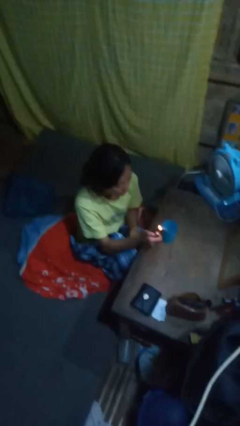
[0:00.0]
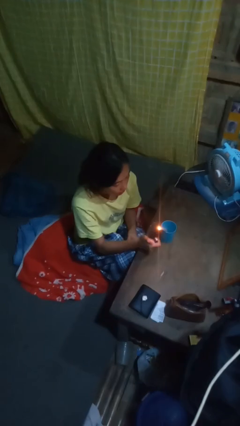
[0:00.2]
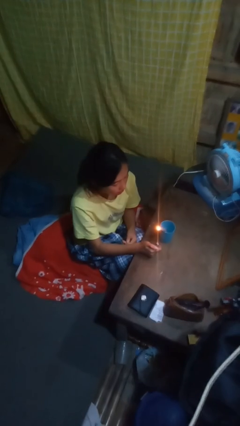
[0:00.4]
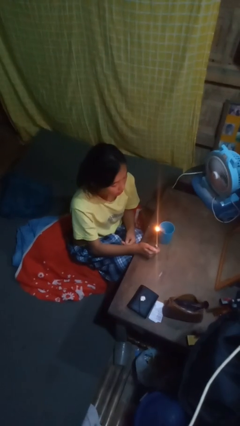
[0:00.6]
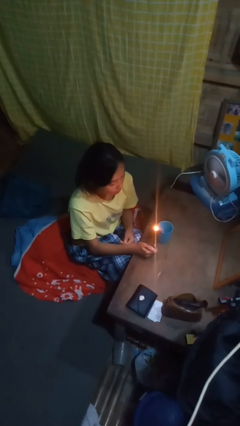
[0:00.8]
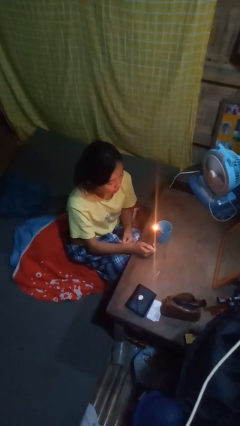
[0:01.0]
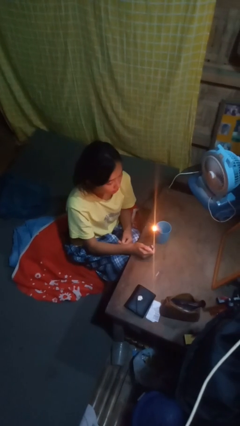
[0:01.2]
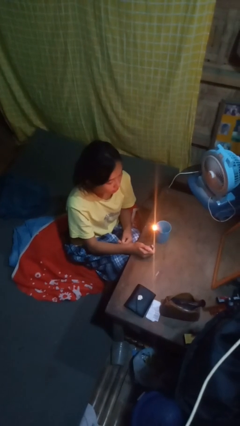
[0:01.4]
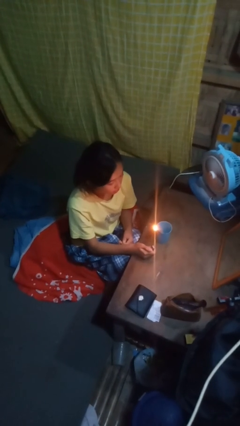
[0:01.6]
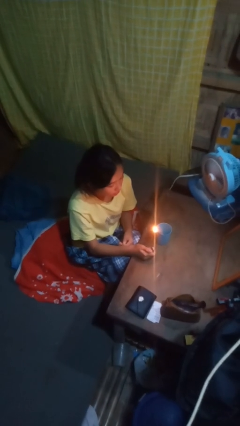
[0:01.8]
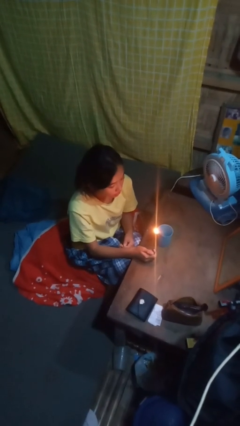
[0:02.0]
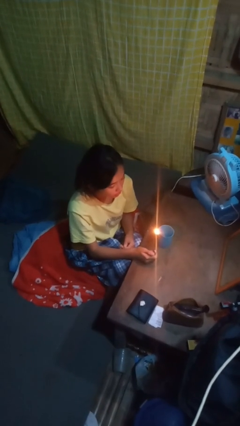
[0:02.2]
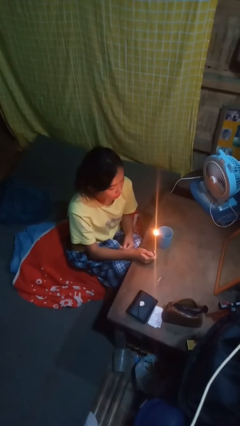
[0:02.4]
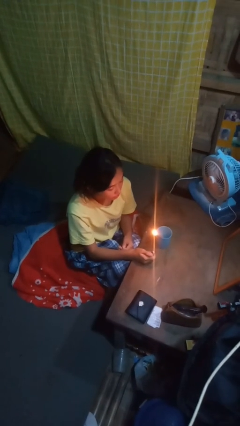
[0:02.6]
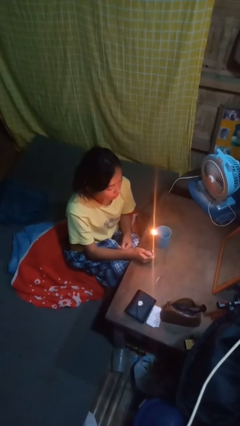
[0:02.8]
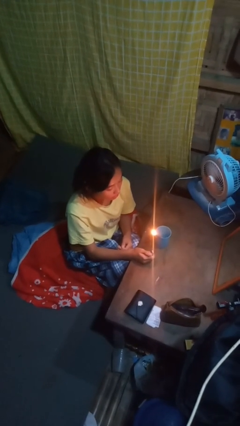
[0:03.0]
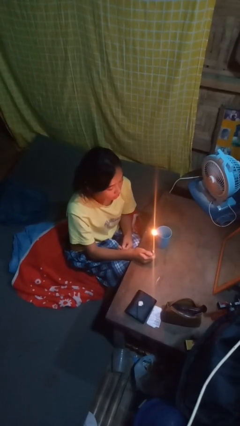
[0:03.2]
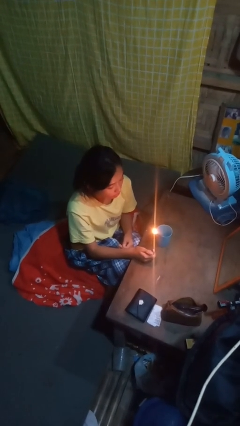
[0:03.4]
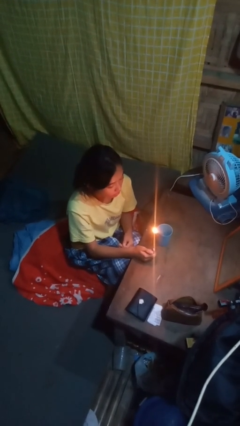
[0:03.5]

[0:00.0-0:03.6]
person lights candle

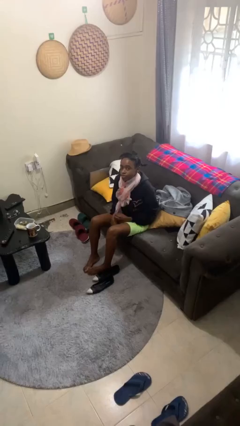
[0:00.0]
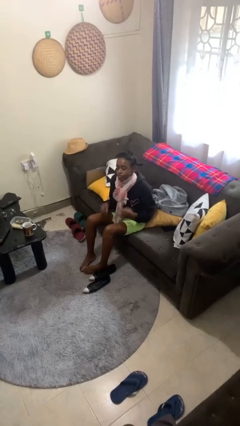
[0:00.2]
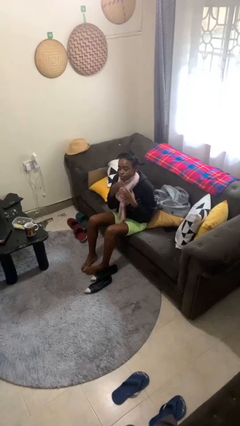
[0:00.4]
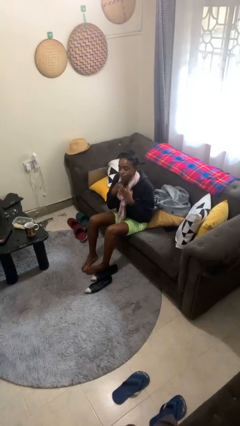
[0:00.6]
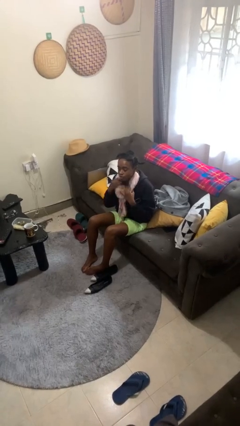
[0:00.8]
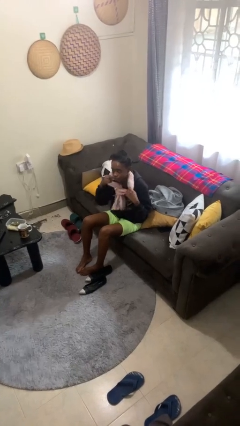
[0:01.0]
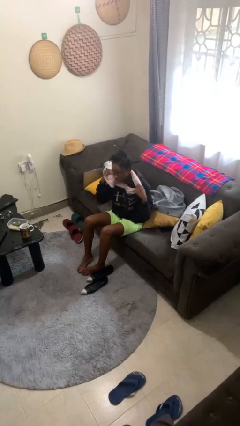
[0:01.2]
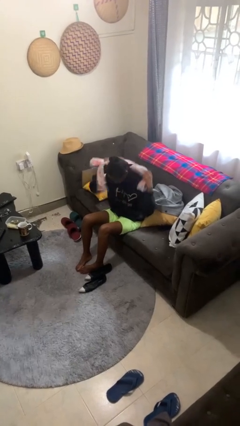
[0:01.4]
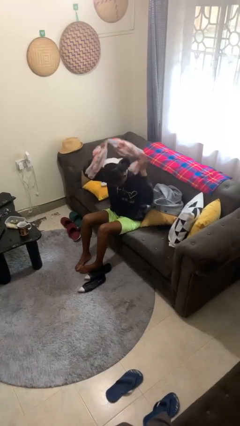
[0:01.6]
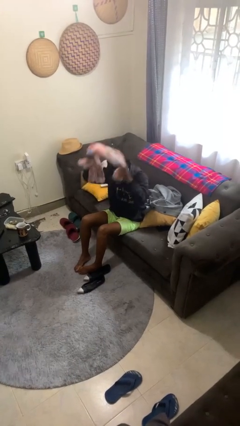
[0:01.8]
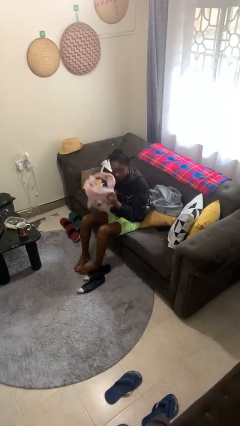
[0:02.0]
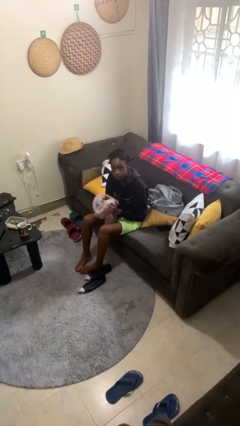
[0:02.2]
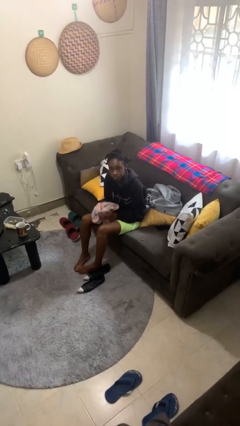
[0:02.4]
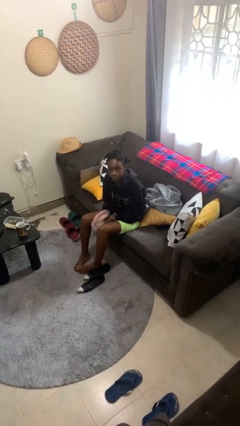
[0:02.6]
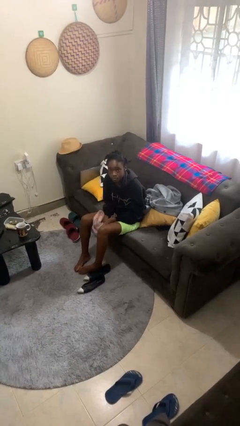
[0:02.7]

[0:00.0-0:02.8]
person takes off scarf

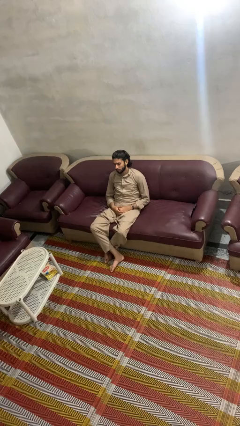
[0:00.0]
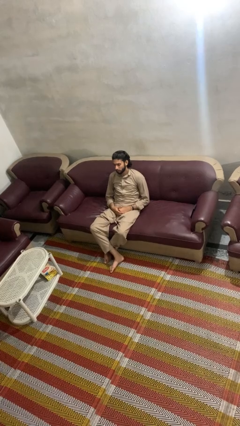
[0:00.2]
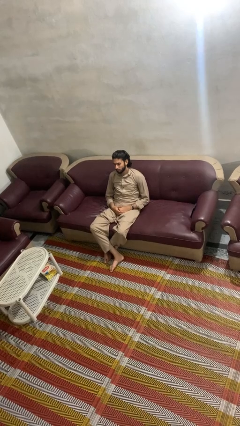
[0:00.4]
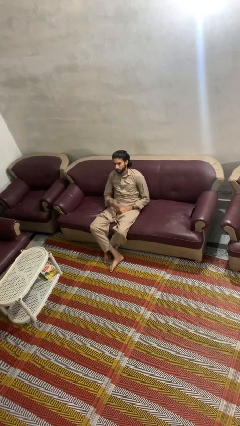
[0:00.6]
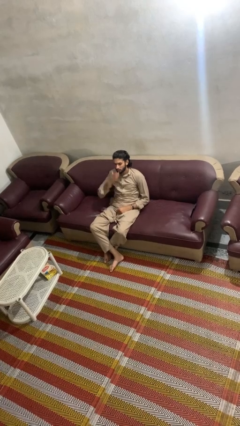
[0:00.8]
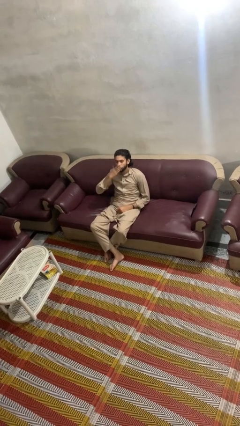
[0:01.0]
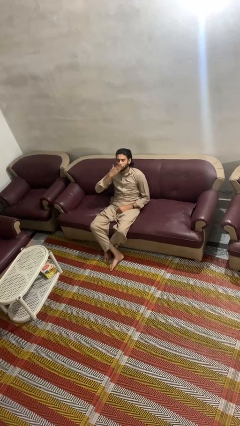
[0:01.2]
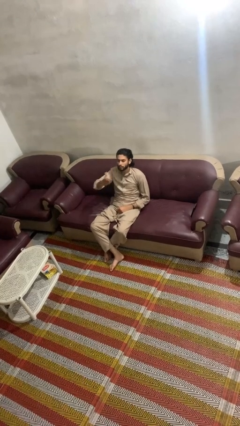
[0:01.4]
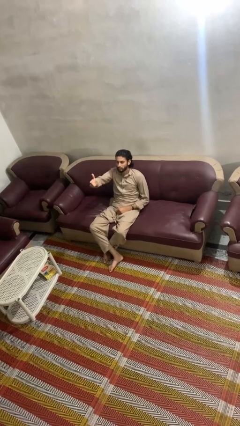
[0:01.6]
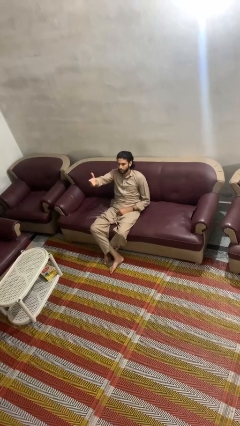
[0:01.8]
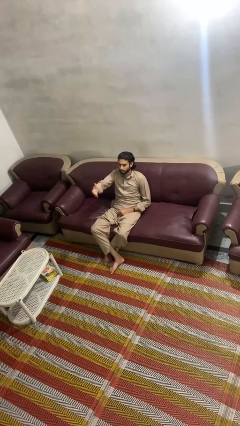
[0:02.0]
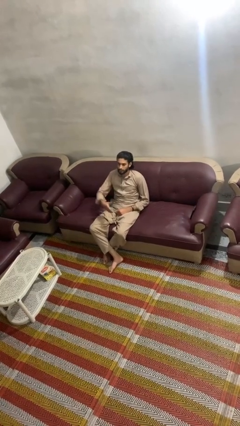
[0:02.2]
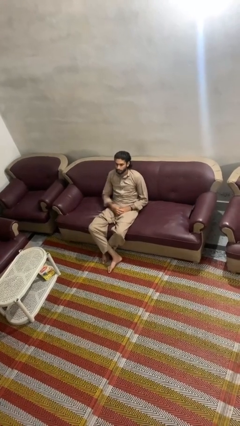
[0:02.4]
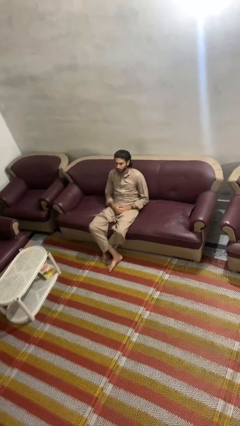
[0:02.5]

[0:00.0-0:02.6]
person gestures blow kiss

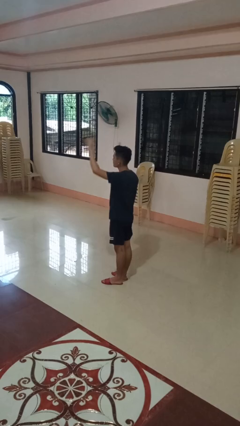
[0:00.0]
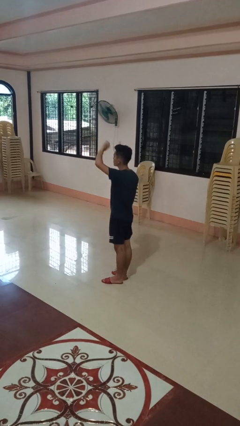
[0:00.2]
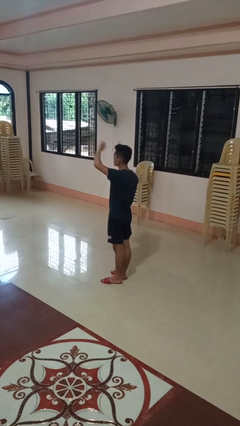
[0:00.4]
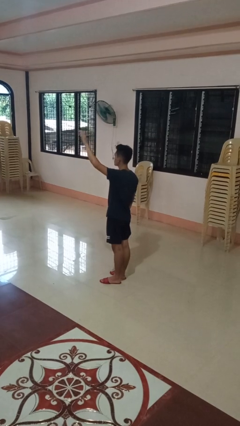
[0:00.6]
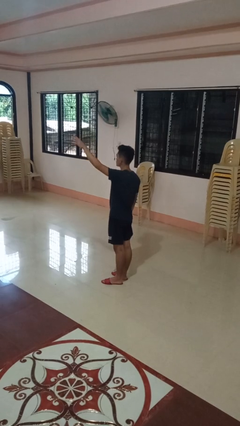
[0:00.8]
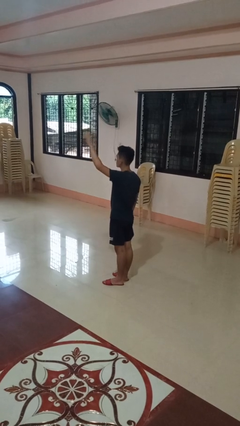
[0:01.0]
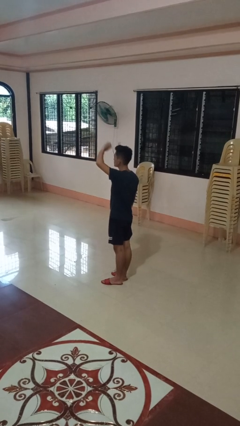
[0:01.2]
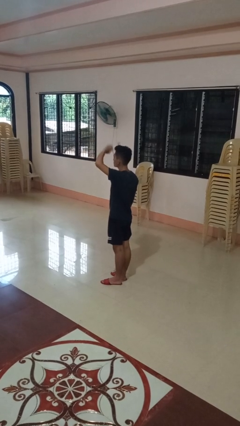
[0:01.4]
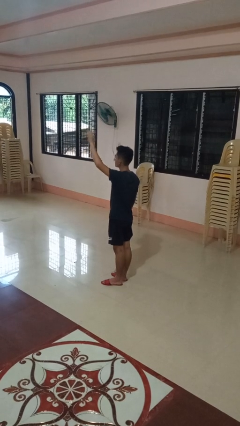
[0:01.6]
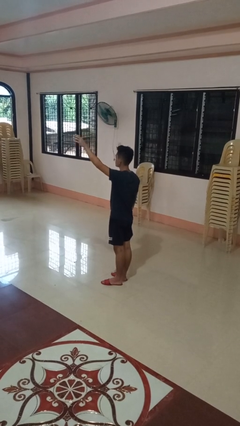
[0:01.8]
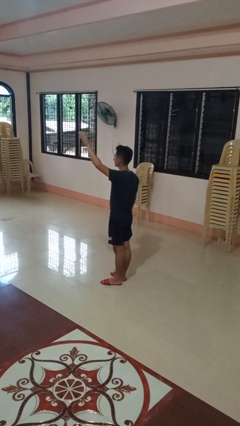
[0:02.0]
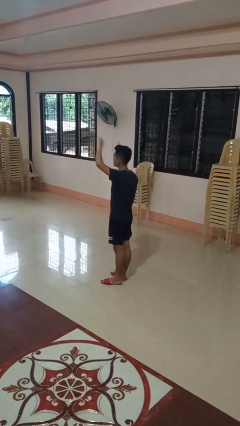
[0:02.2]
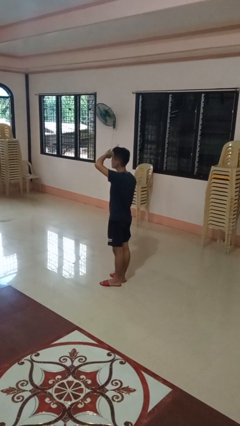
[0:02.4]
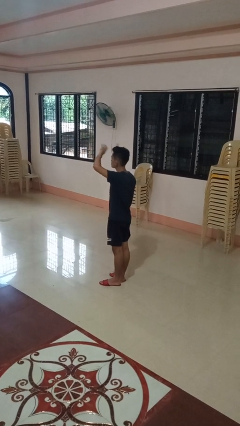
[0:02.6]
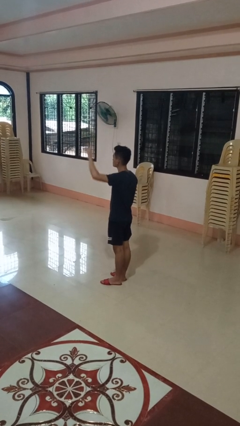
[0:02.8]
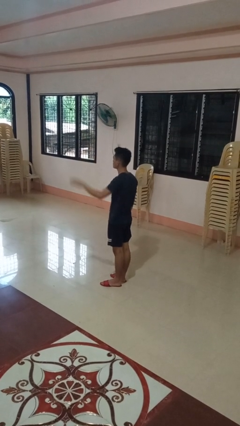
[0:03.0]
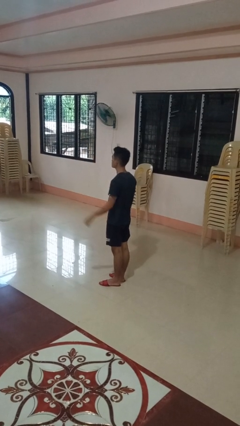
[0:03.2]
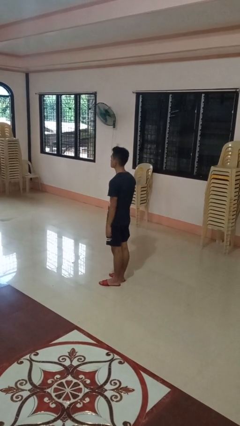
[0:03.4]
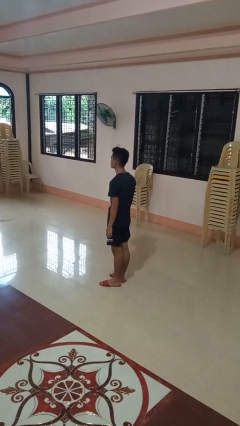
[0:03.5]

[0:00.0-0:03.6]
person waves at person

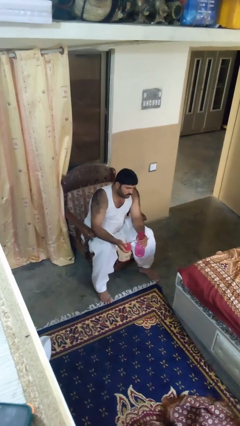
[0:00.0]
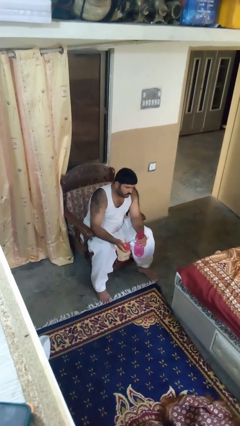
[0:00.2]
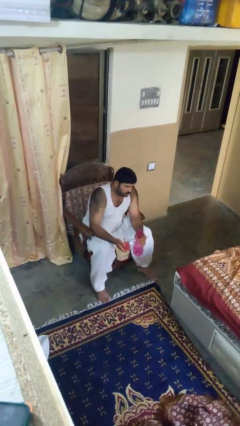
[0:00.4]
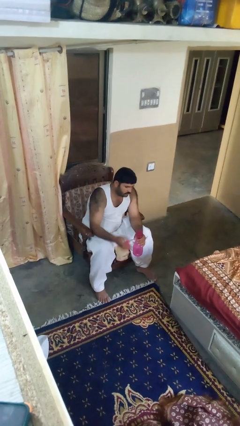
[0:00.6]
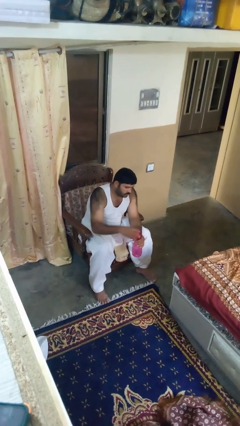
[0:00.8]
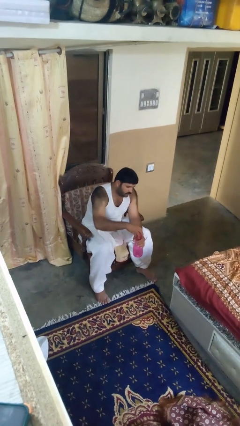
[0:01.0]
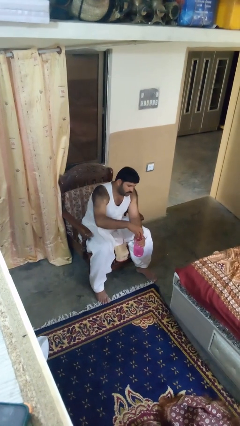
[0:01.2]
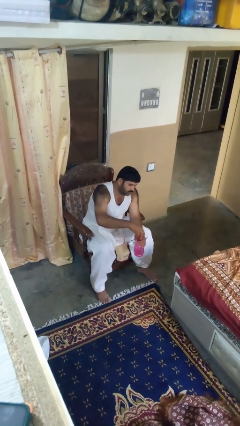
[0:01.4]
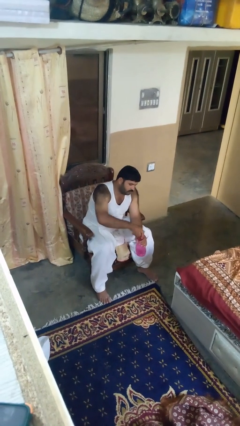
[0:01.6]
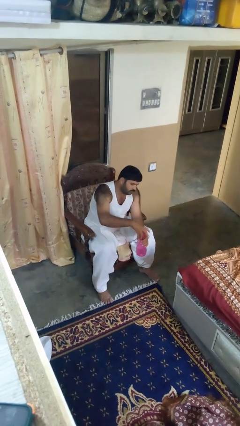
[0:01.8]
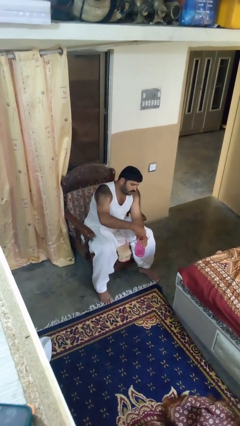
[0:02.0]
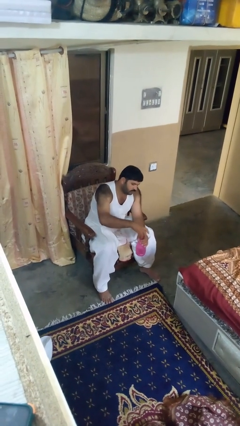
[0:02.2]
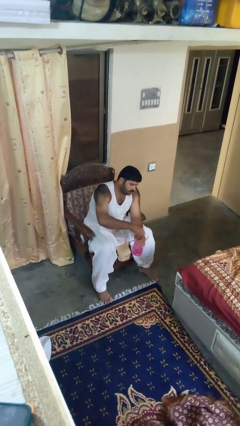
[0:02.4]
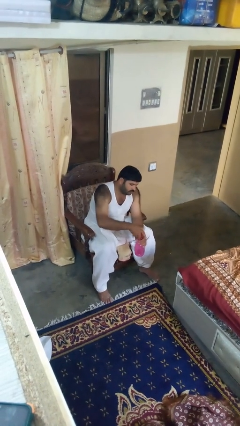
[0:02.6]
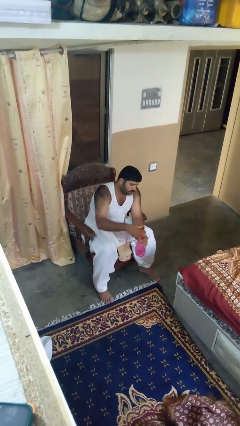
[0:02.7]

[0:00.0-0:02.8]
person screws lid to bottle

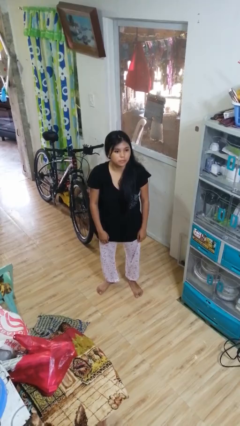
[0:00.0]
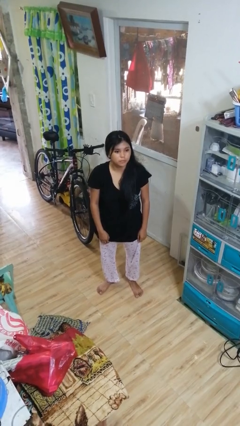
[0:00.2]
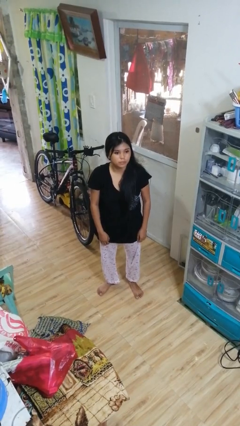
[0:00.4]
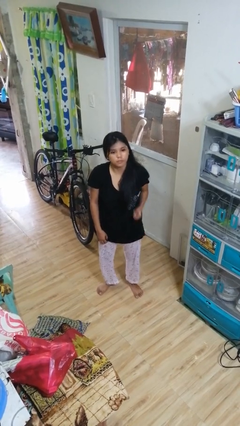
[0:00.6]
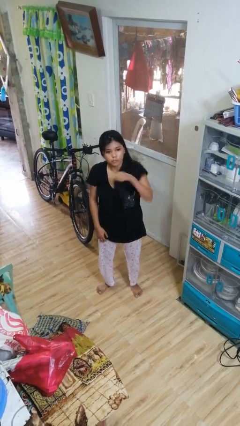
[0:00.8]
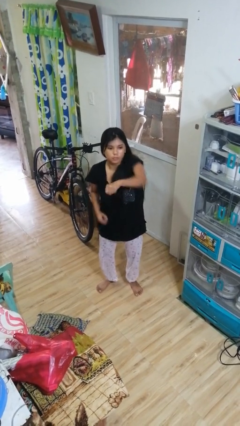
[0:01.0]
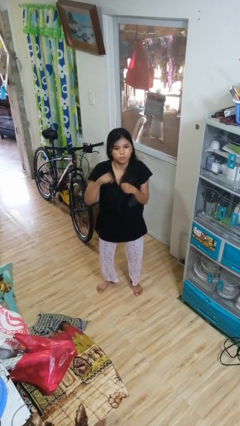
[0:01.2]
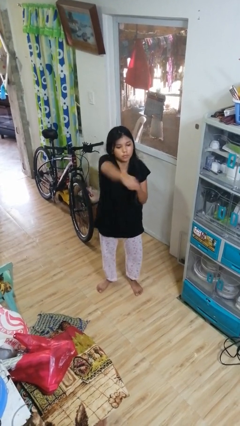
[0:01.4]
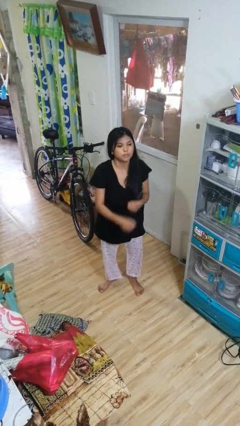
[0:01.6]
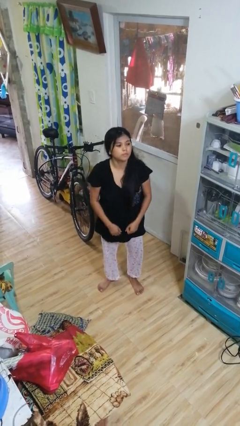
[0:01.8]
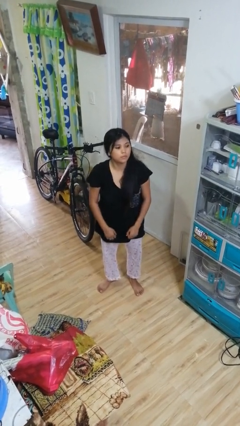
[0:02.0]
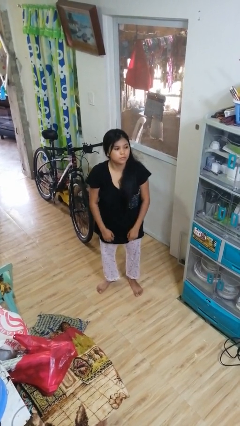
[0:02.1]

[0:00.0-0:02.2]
person punches
